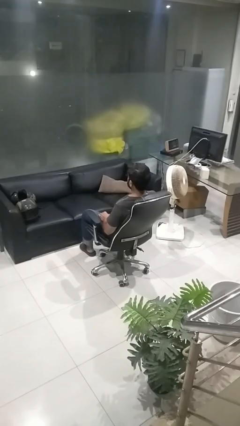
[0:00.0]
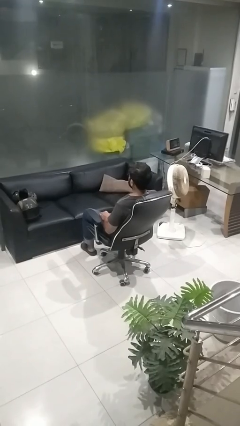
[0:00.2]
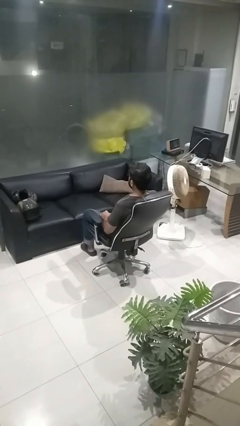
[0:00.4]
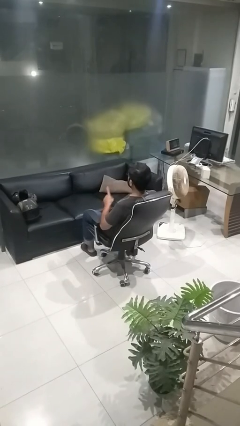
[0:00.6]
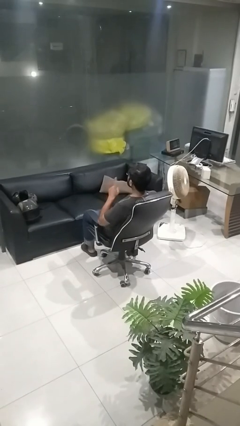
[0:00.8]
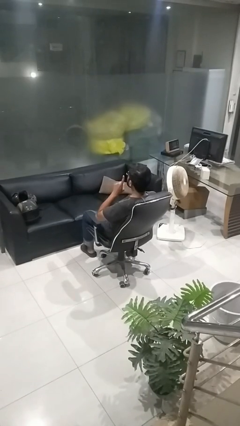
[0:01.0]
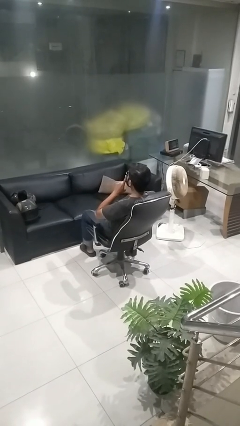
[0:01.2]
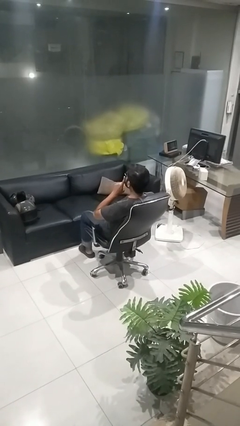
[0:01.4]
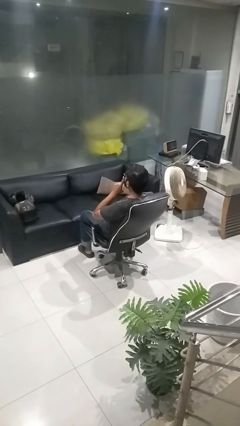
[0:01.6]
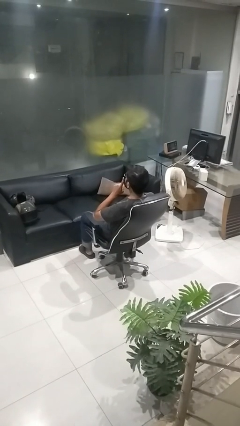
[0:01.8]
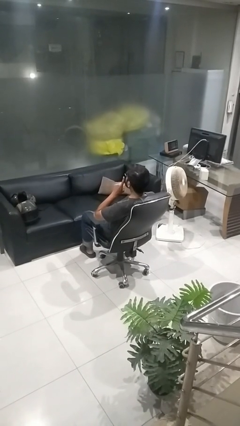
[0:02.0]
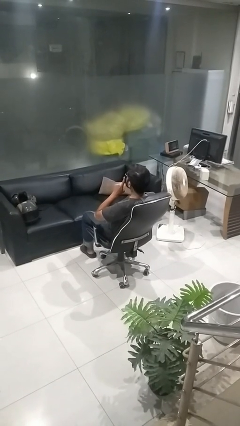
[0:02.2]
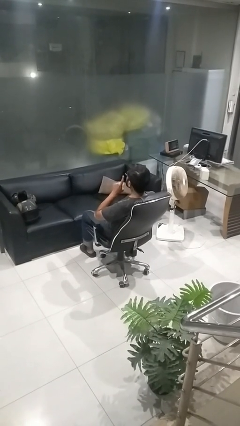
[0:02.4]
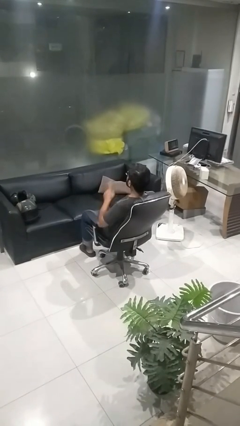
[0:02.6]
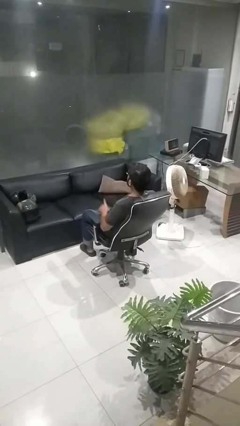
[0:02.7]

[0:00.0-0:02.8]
person gestures be quiet

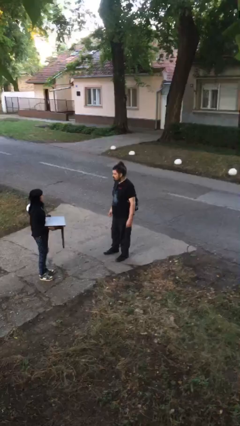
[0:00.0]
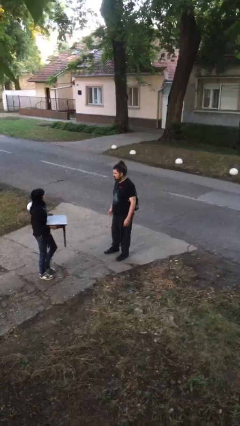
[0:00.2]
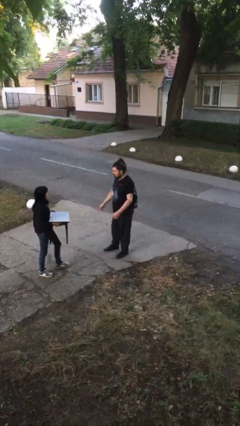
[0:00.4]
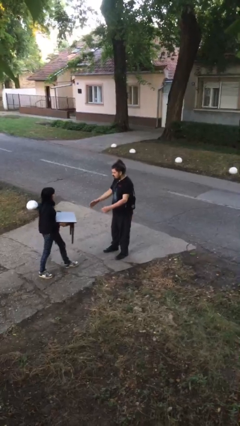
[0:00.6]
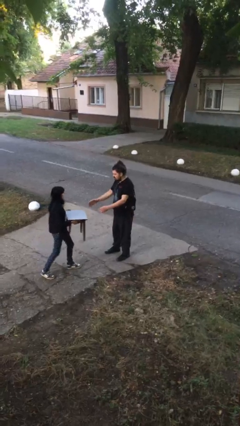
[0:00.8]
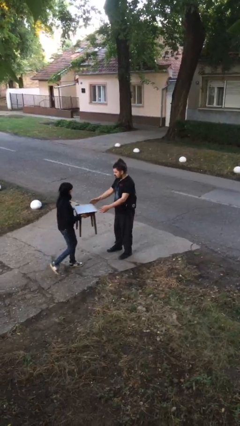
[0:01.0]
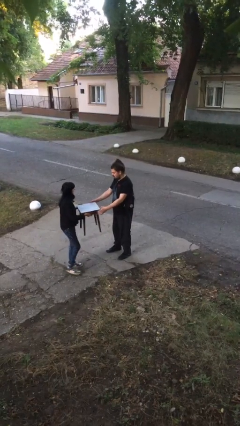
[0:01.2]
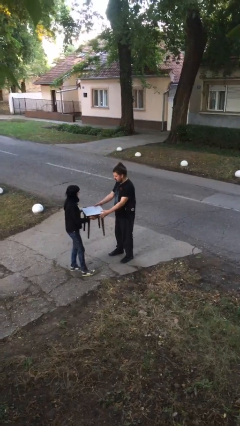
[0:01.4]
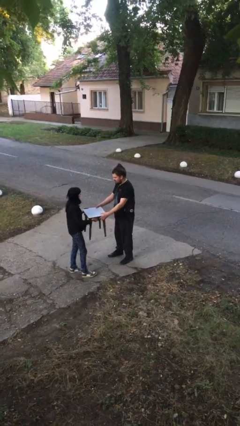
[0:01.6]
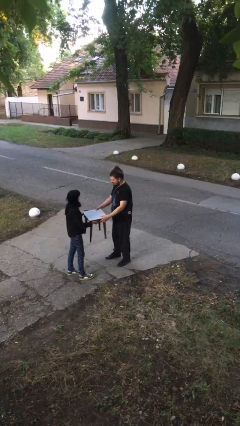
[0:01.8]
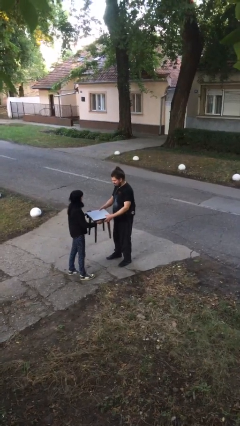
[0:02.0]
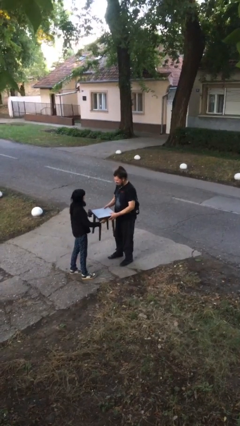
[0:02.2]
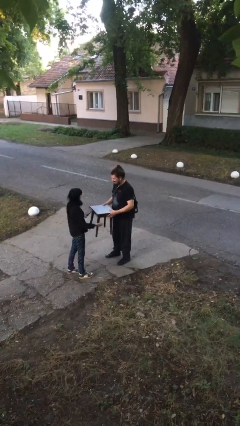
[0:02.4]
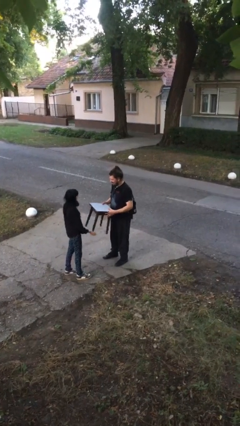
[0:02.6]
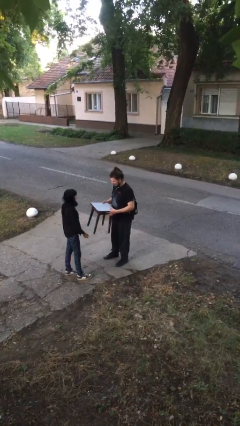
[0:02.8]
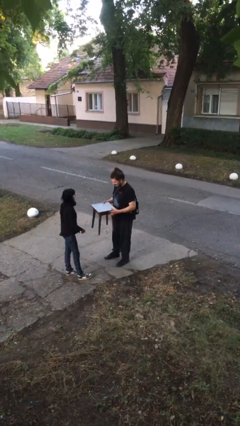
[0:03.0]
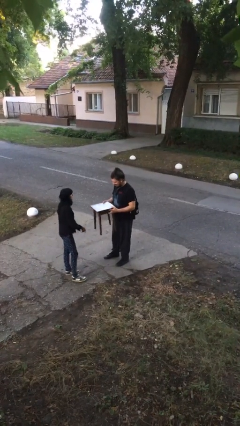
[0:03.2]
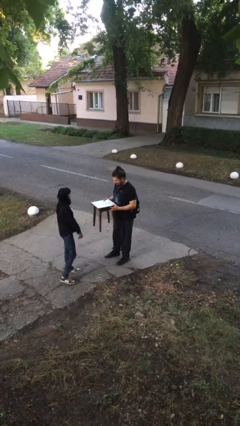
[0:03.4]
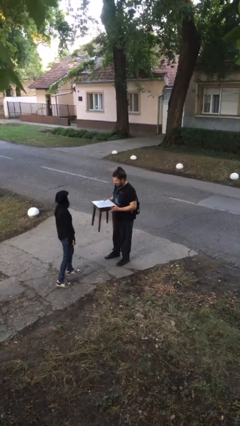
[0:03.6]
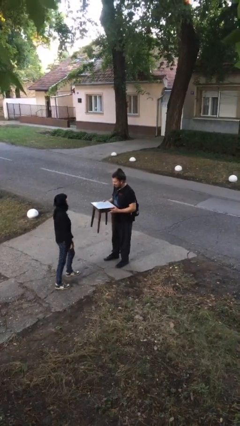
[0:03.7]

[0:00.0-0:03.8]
person transfers object to person

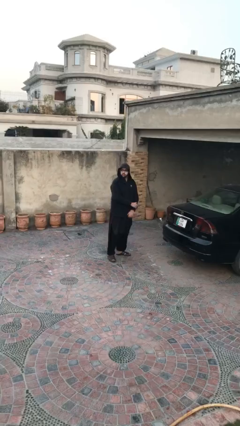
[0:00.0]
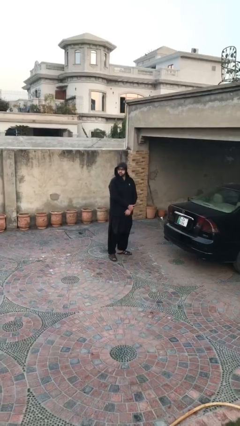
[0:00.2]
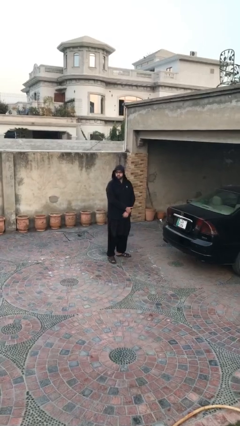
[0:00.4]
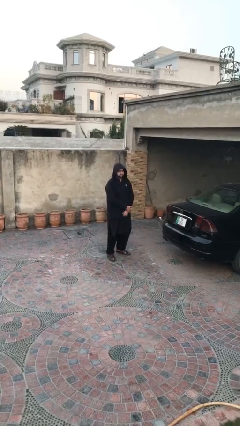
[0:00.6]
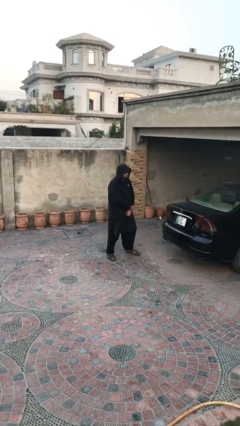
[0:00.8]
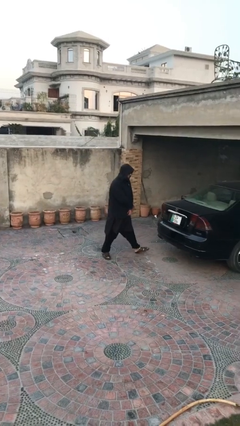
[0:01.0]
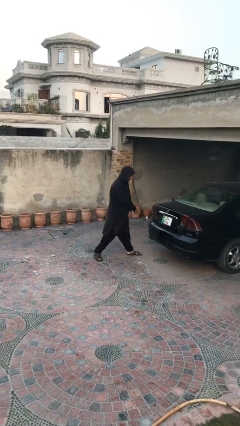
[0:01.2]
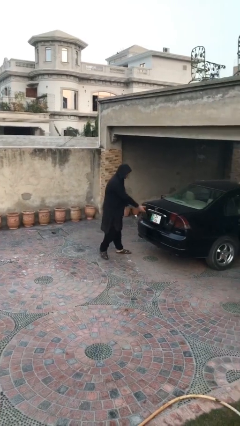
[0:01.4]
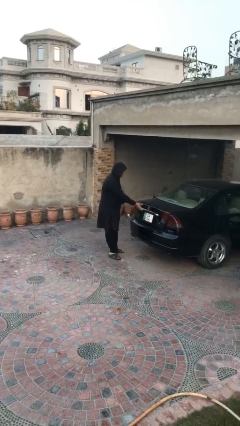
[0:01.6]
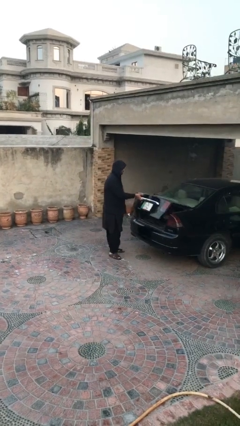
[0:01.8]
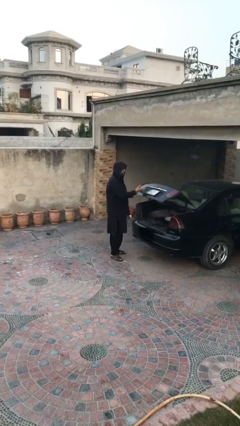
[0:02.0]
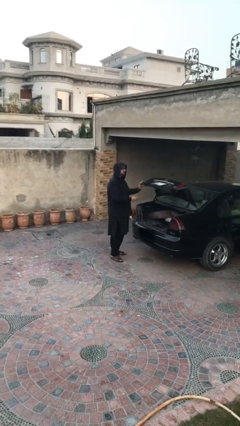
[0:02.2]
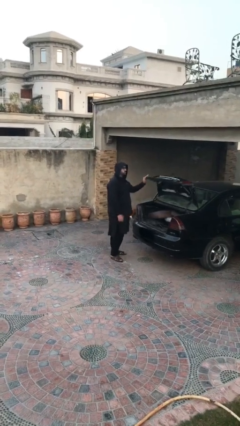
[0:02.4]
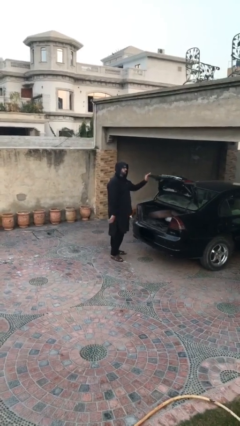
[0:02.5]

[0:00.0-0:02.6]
person opens car trunk

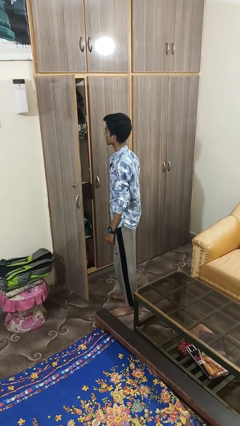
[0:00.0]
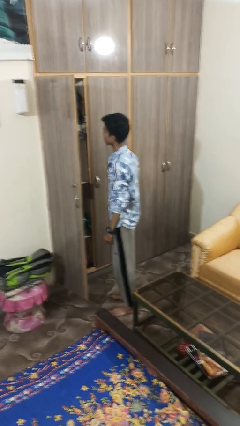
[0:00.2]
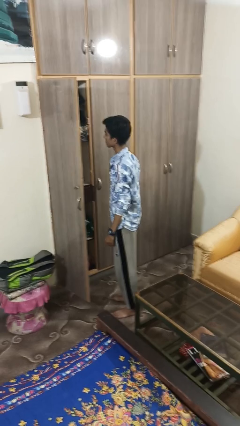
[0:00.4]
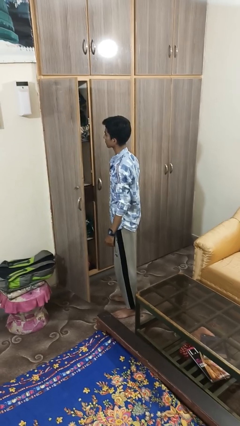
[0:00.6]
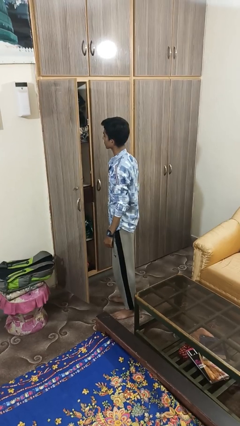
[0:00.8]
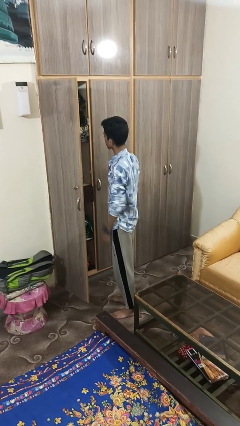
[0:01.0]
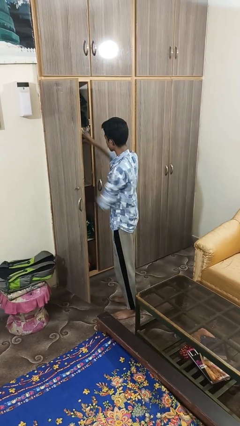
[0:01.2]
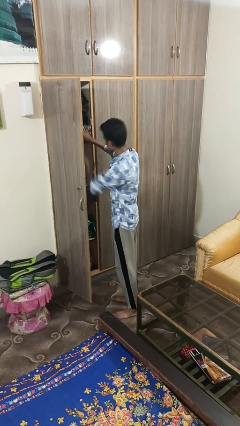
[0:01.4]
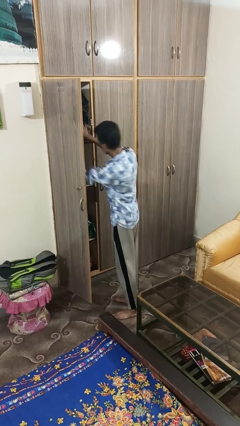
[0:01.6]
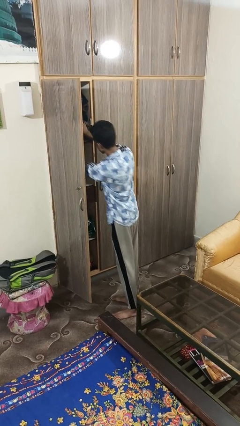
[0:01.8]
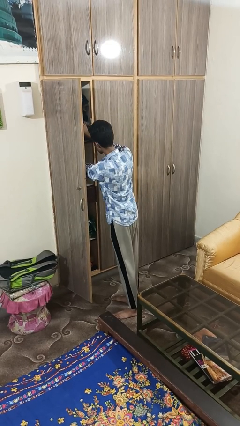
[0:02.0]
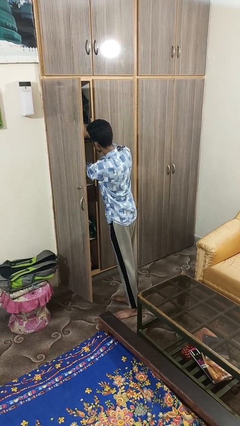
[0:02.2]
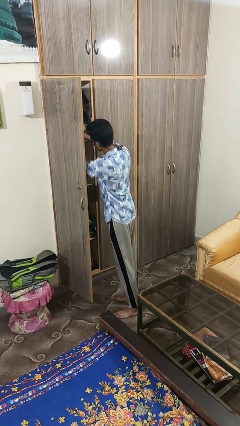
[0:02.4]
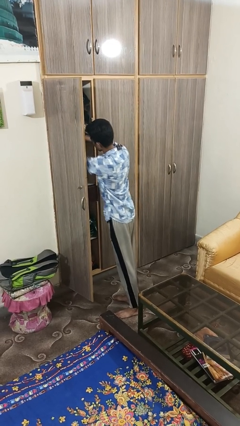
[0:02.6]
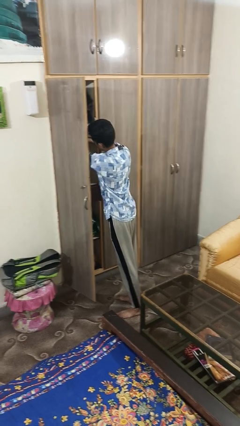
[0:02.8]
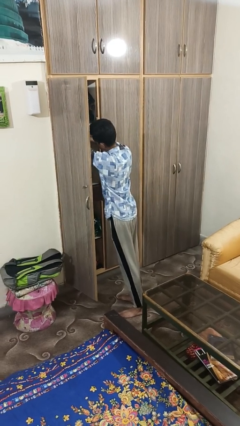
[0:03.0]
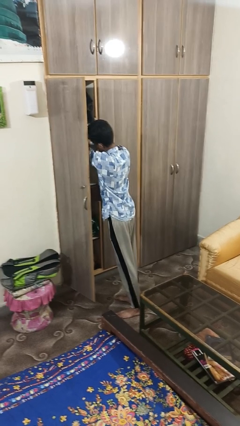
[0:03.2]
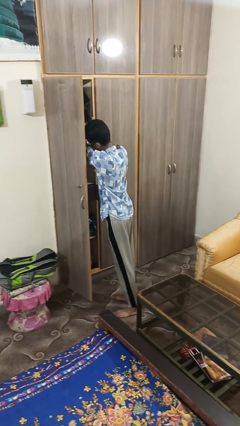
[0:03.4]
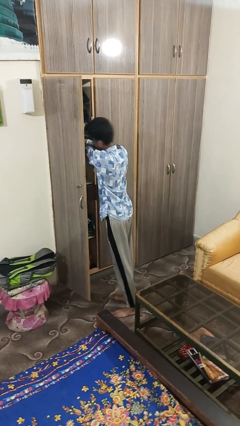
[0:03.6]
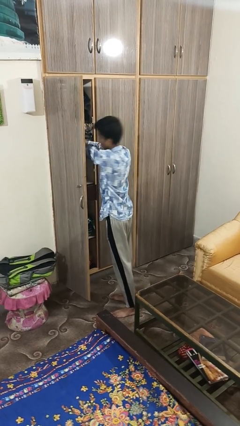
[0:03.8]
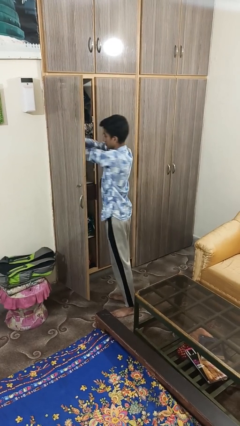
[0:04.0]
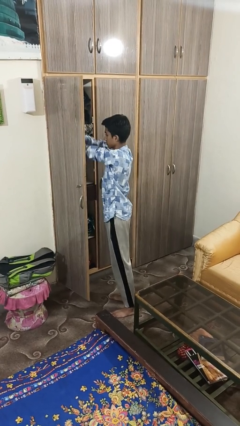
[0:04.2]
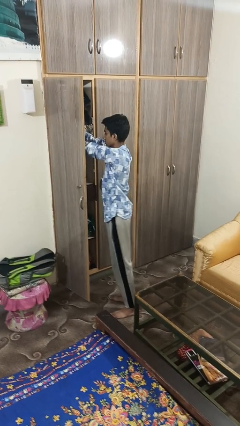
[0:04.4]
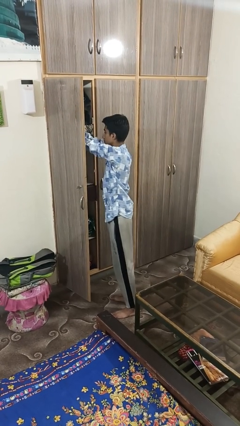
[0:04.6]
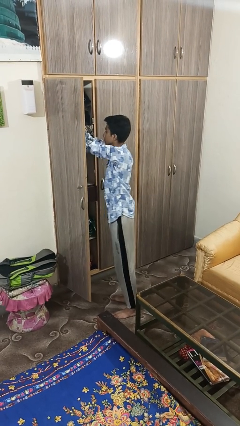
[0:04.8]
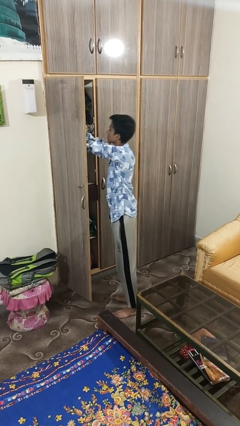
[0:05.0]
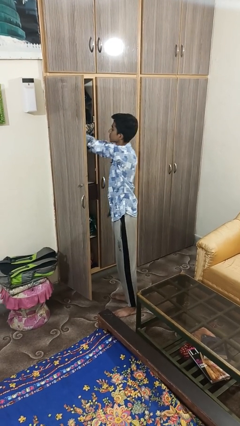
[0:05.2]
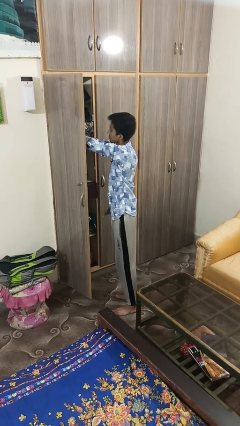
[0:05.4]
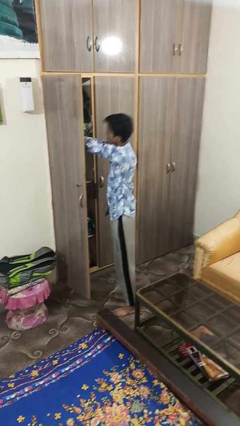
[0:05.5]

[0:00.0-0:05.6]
person searches in cabinet

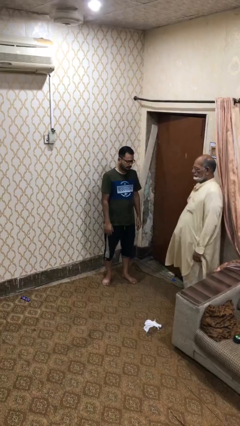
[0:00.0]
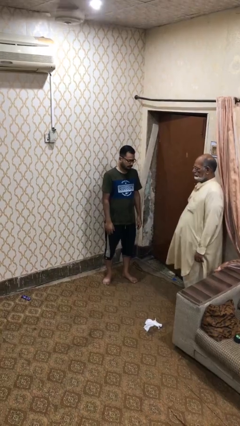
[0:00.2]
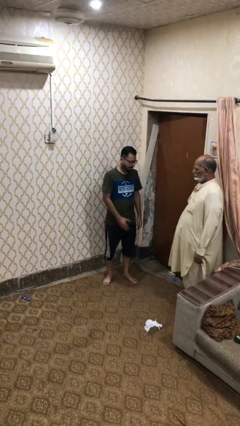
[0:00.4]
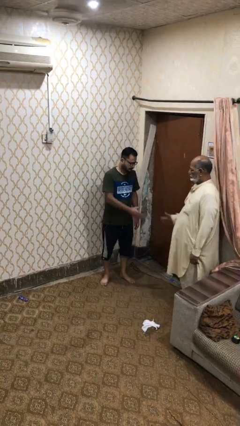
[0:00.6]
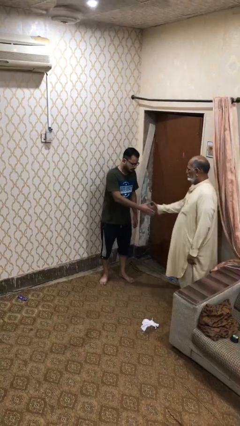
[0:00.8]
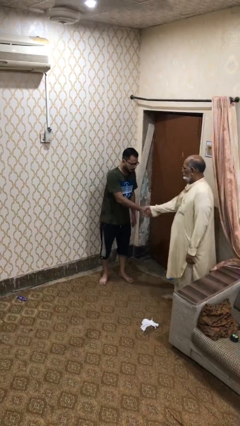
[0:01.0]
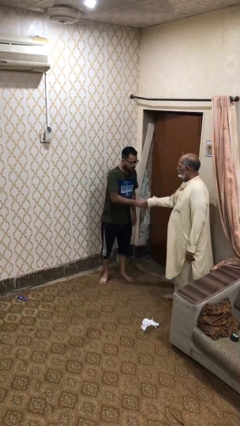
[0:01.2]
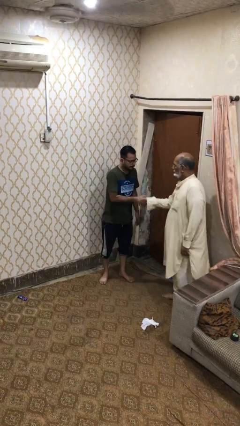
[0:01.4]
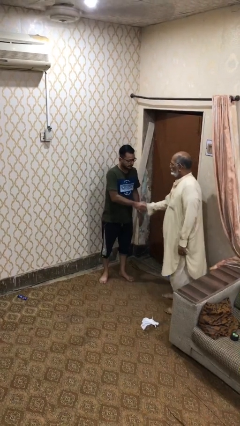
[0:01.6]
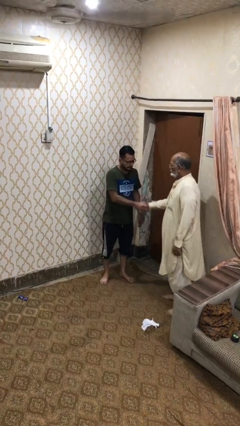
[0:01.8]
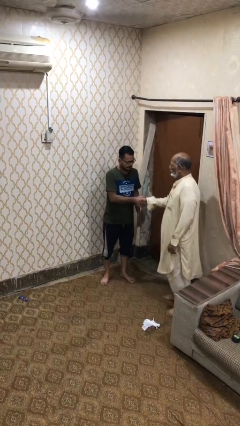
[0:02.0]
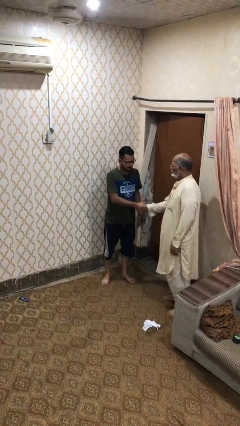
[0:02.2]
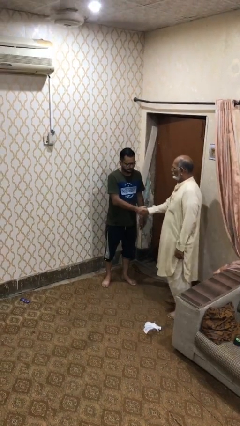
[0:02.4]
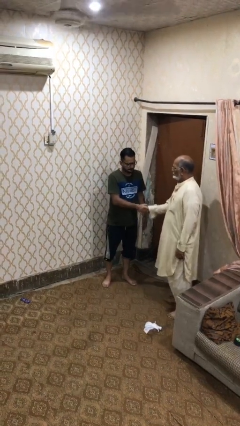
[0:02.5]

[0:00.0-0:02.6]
person shakes hand
